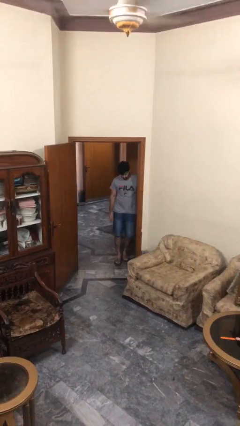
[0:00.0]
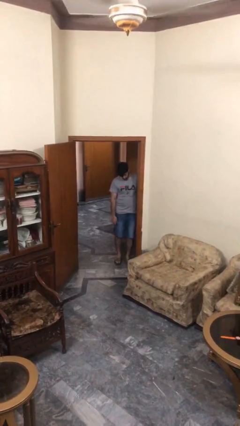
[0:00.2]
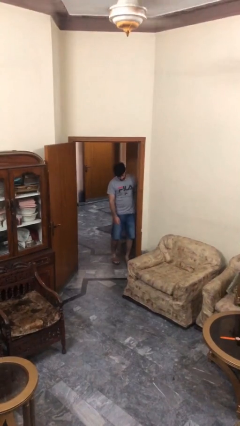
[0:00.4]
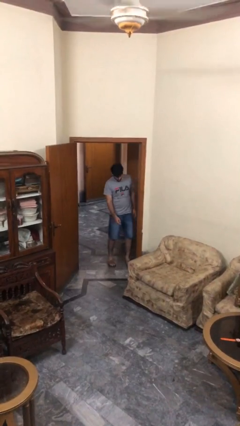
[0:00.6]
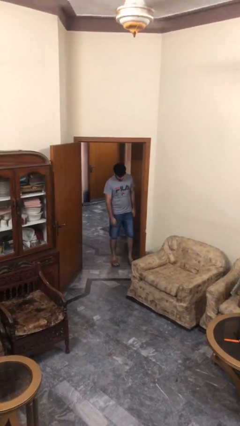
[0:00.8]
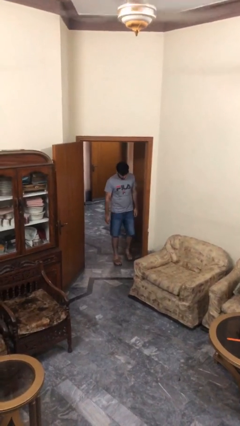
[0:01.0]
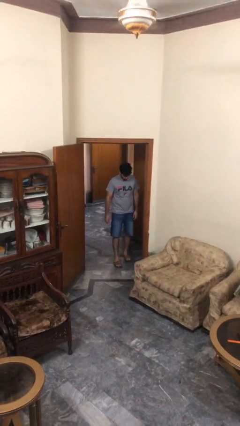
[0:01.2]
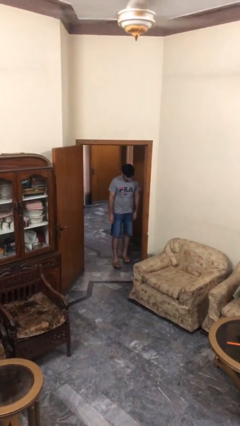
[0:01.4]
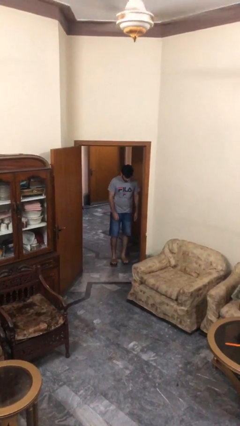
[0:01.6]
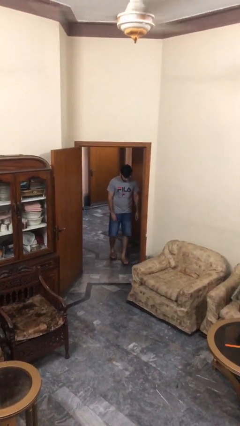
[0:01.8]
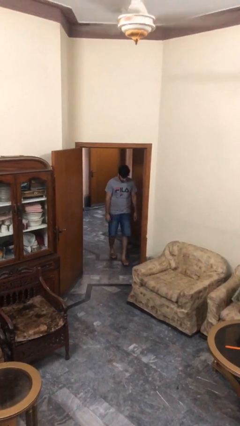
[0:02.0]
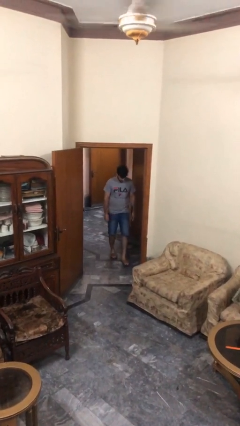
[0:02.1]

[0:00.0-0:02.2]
person bumps into wall

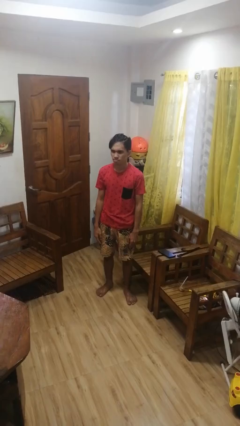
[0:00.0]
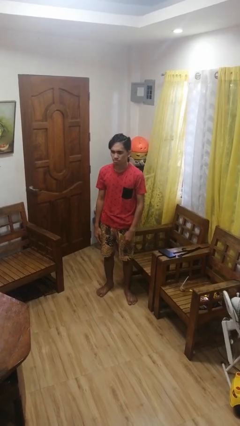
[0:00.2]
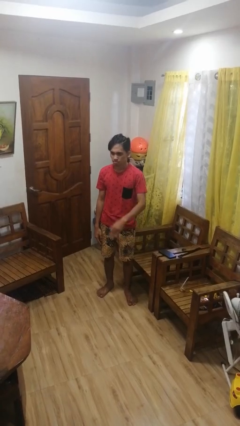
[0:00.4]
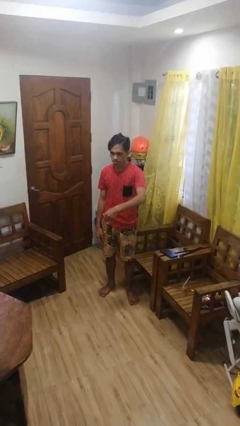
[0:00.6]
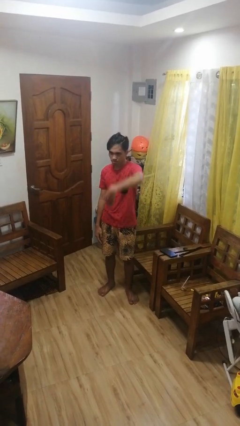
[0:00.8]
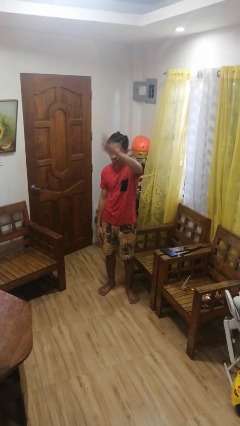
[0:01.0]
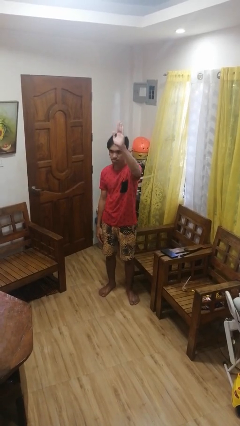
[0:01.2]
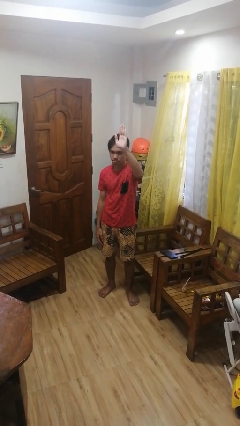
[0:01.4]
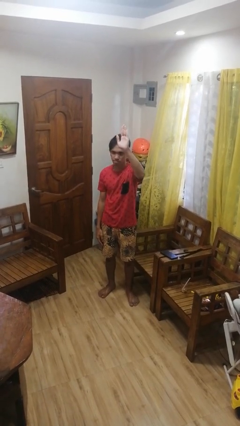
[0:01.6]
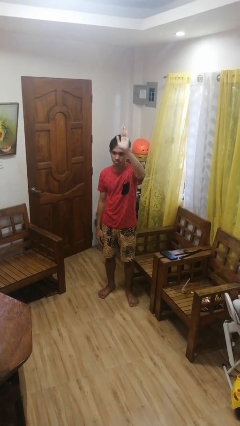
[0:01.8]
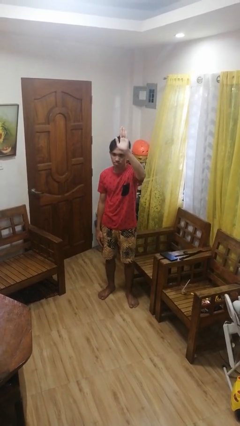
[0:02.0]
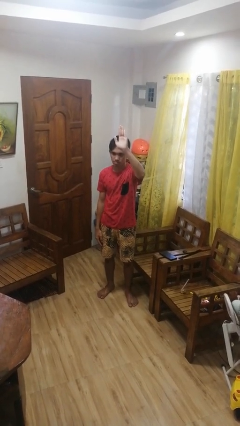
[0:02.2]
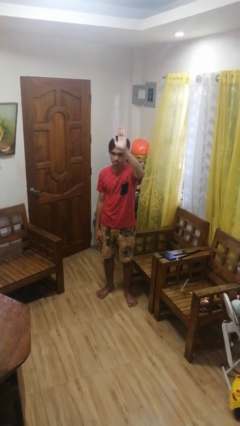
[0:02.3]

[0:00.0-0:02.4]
person gestures swipe up

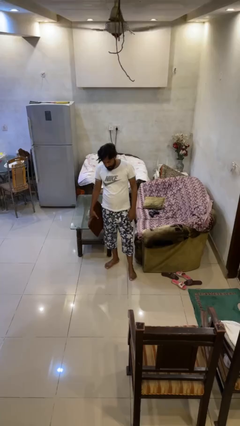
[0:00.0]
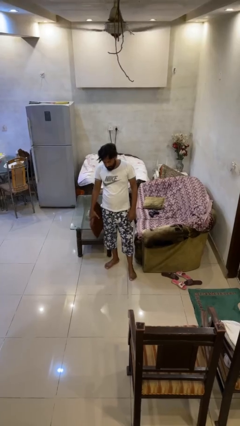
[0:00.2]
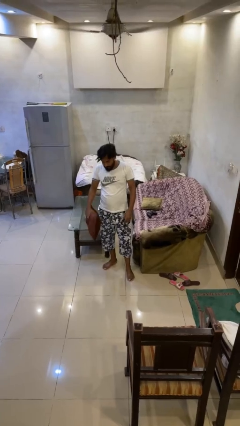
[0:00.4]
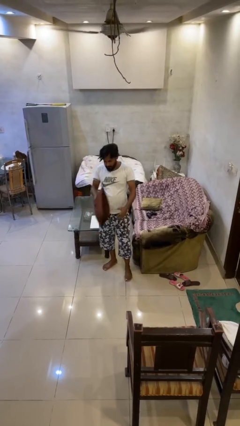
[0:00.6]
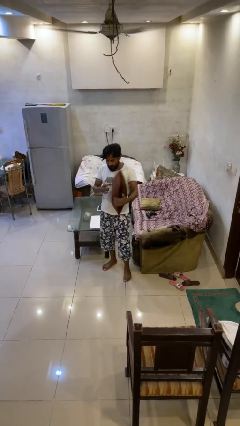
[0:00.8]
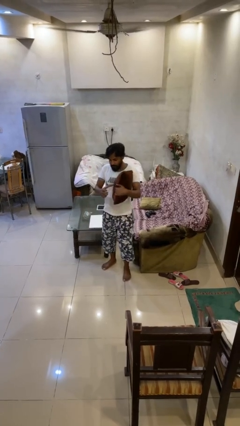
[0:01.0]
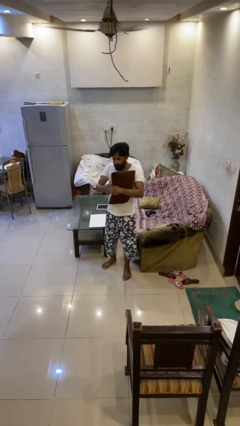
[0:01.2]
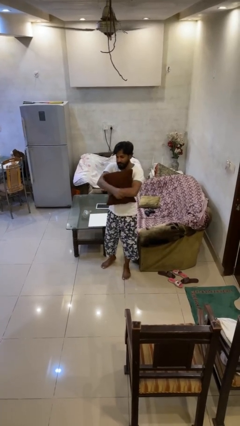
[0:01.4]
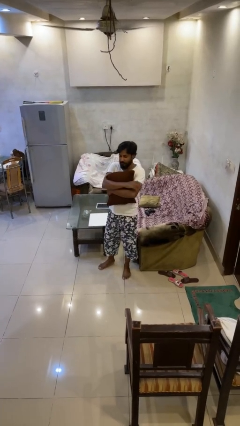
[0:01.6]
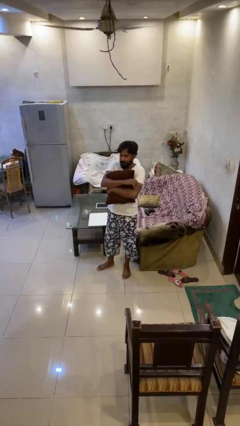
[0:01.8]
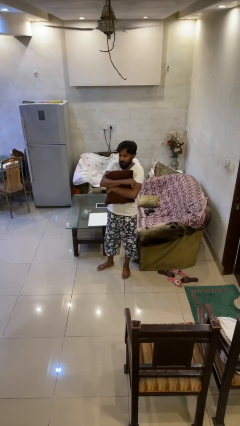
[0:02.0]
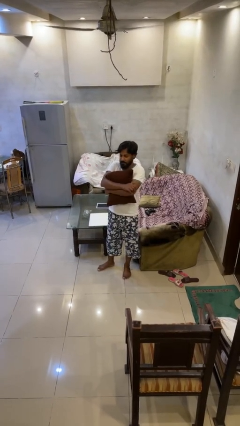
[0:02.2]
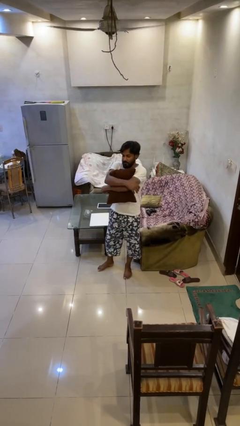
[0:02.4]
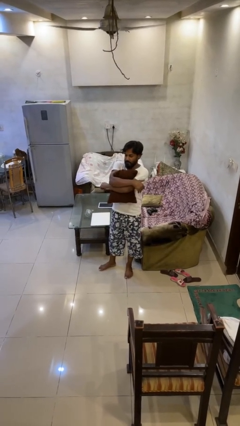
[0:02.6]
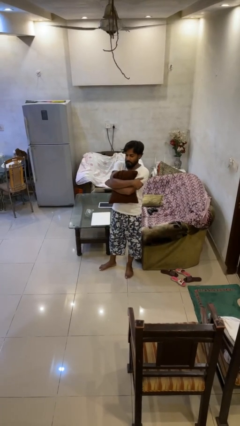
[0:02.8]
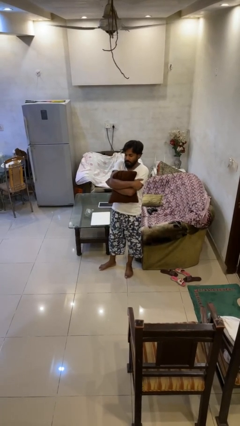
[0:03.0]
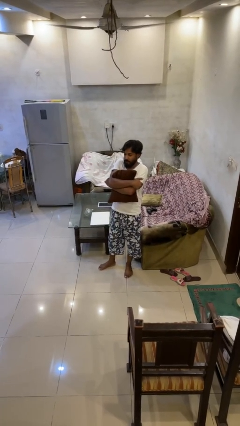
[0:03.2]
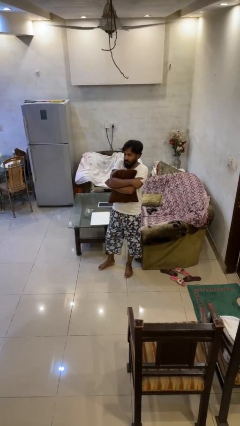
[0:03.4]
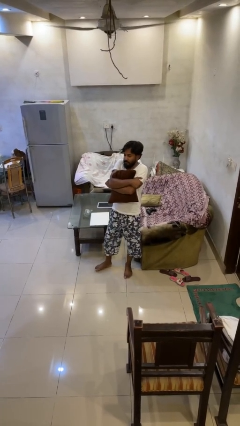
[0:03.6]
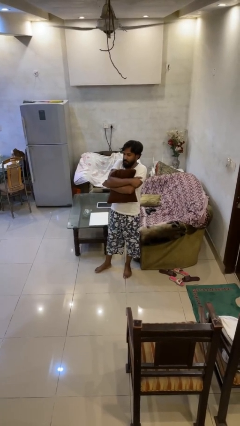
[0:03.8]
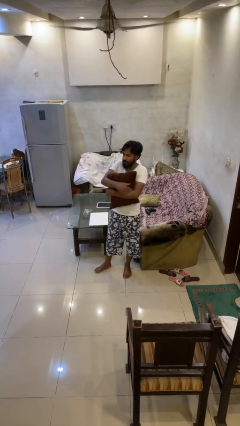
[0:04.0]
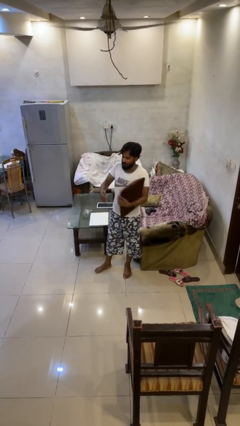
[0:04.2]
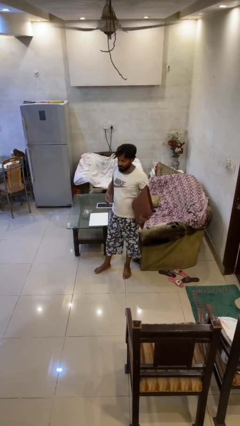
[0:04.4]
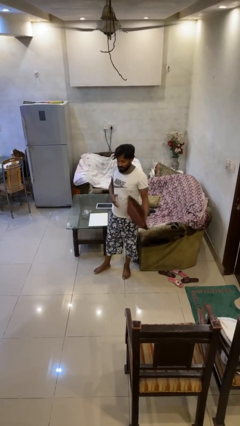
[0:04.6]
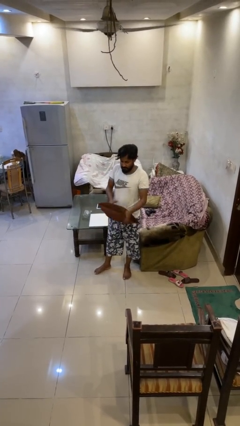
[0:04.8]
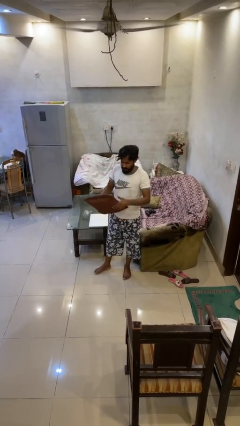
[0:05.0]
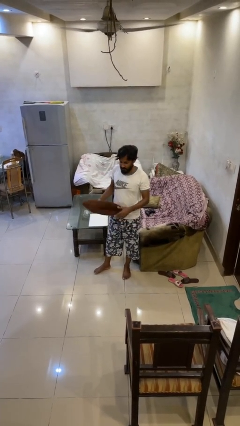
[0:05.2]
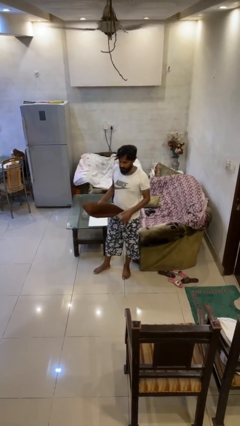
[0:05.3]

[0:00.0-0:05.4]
person squeezes object

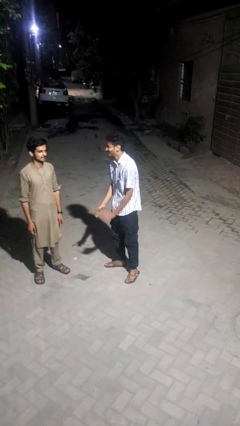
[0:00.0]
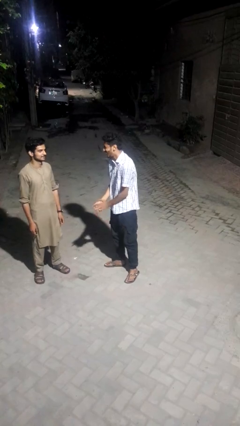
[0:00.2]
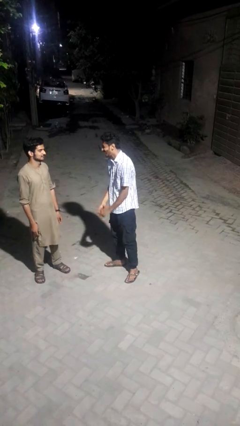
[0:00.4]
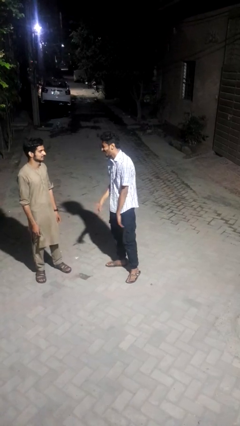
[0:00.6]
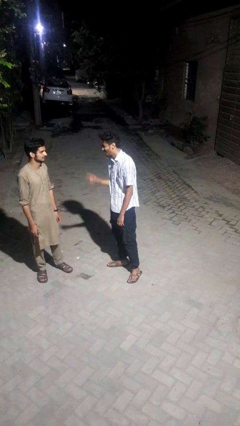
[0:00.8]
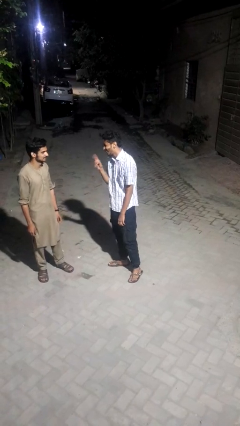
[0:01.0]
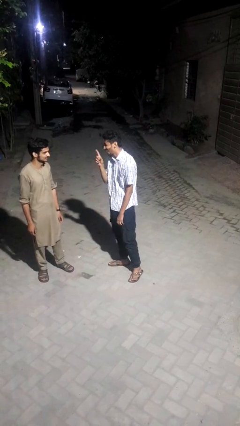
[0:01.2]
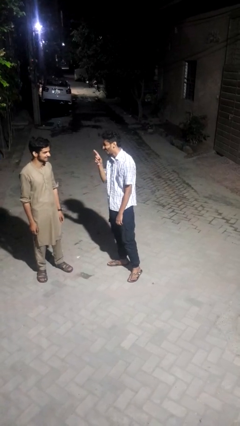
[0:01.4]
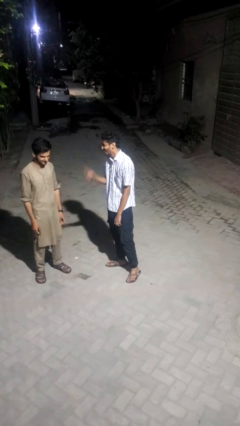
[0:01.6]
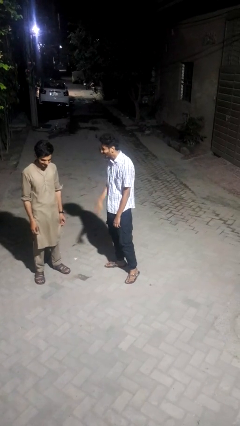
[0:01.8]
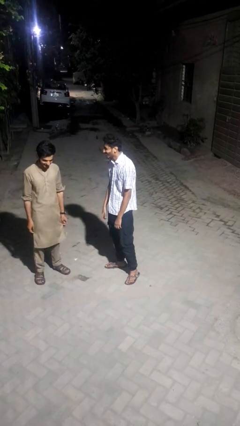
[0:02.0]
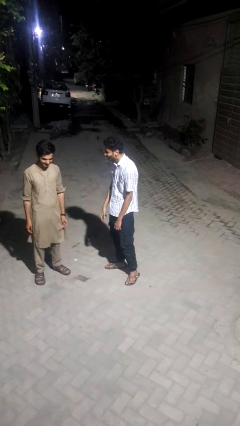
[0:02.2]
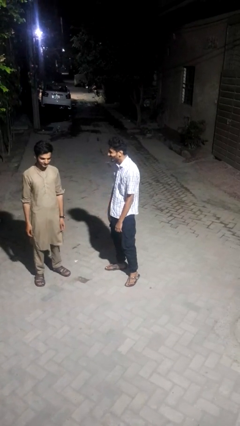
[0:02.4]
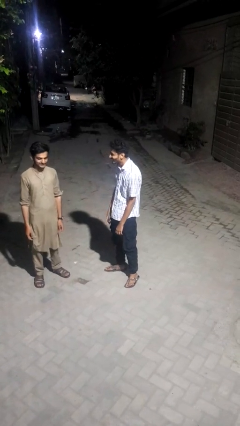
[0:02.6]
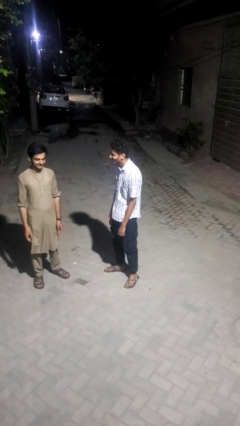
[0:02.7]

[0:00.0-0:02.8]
person laughs with person

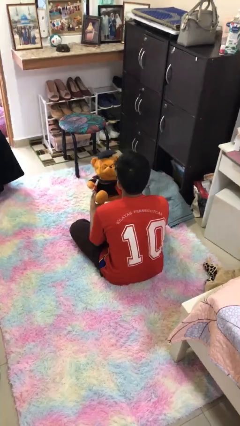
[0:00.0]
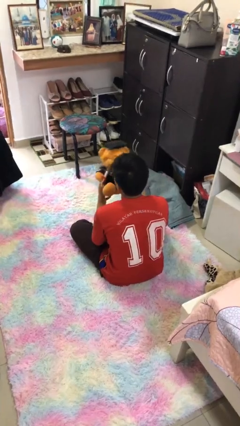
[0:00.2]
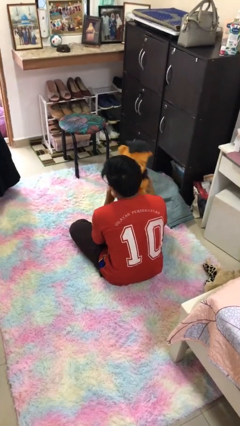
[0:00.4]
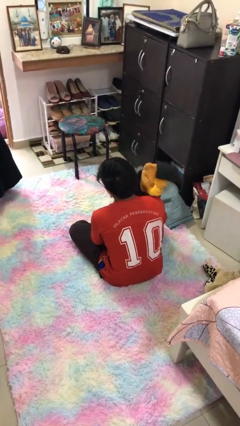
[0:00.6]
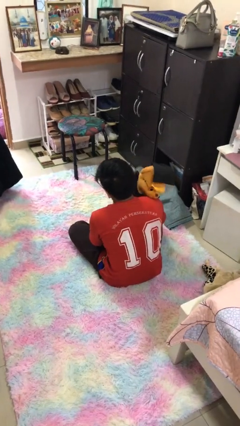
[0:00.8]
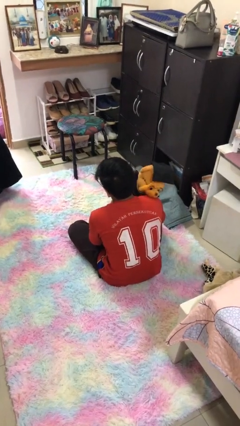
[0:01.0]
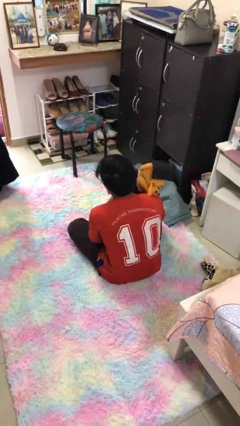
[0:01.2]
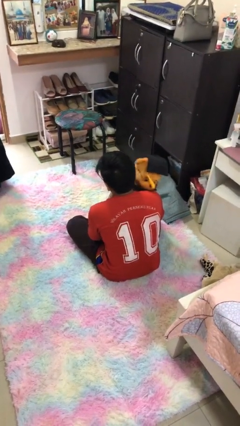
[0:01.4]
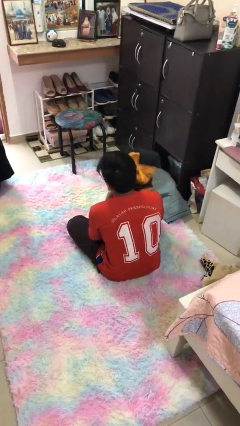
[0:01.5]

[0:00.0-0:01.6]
person hugs stuffed animal

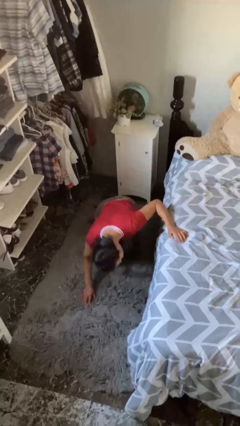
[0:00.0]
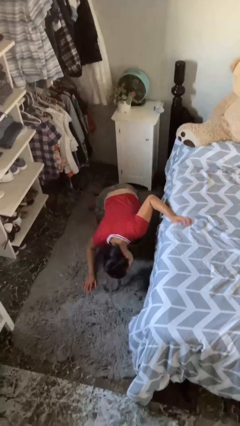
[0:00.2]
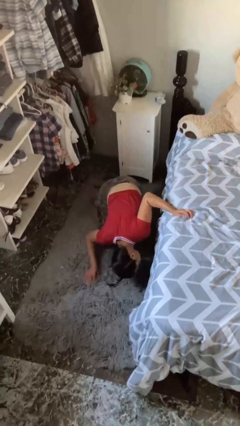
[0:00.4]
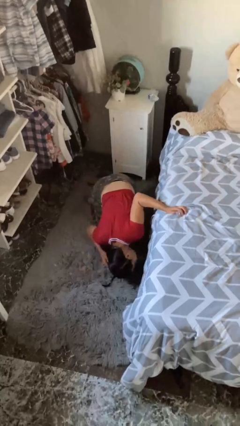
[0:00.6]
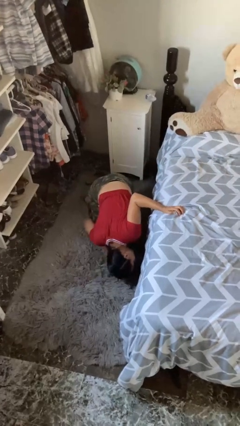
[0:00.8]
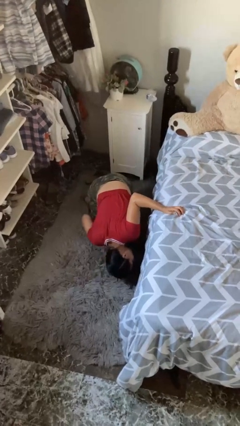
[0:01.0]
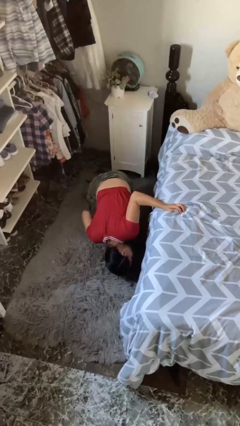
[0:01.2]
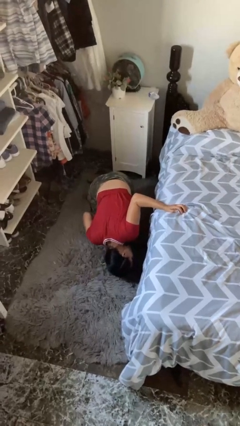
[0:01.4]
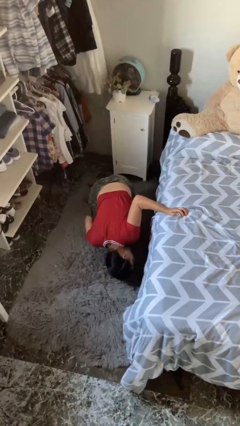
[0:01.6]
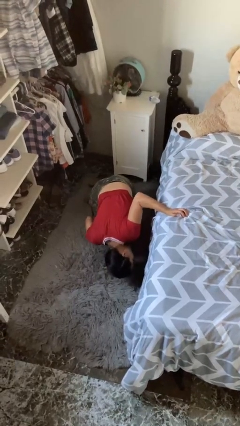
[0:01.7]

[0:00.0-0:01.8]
person searches under bed

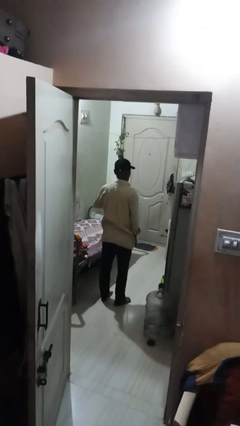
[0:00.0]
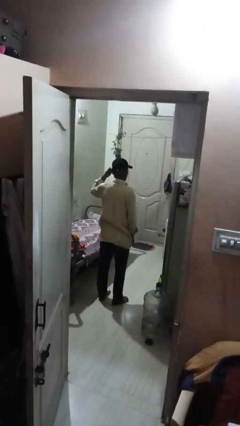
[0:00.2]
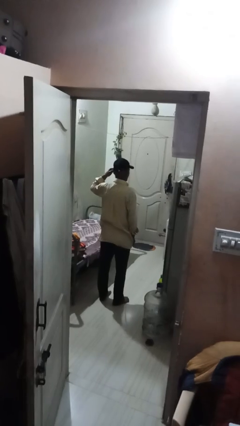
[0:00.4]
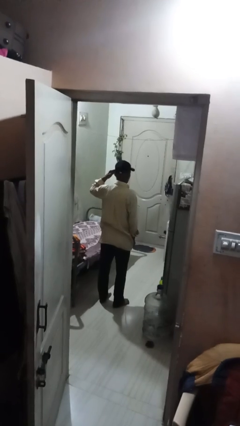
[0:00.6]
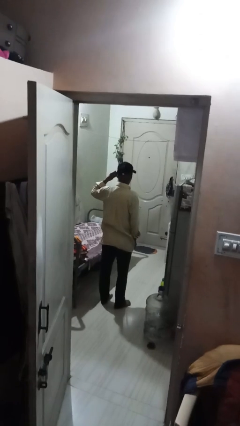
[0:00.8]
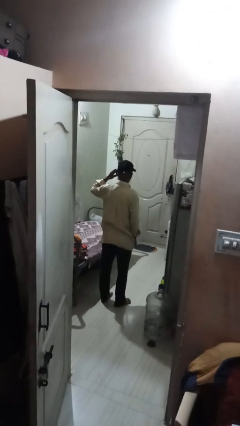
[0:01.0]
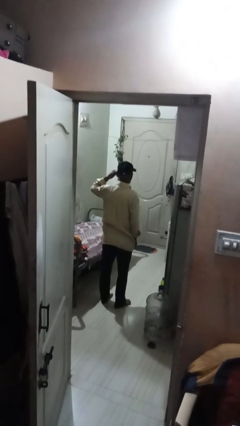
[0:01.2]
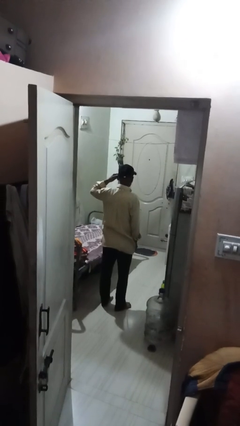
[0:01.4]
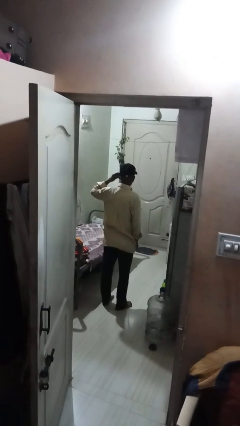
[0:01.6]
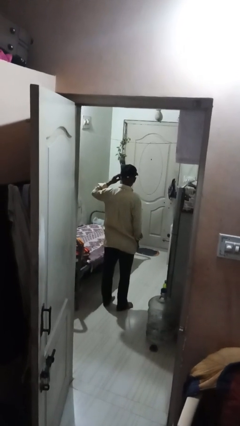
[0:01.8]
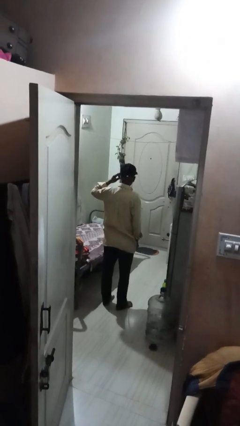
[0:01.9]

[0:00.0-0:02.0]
person touches earlobe
